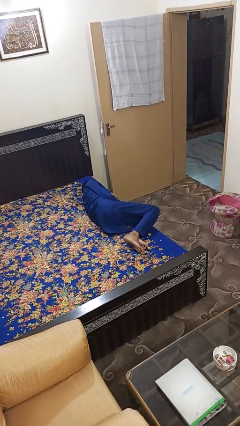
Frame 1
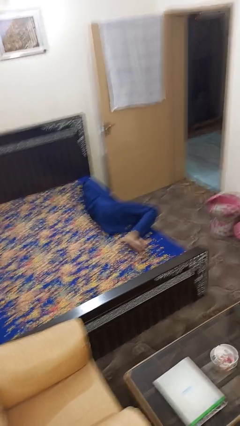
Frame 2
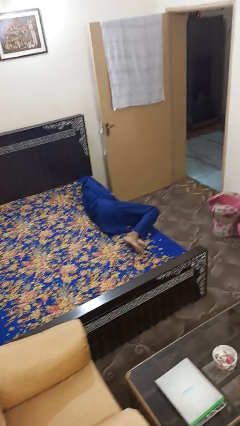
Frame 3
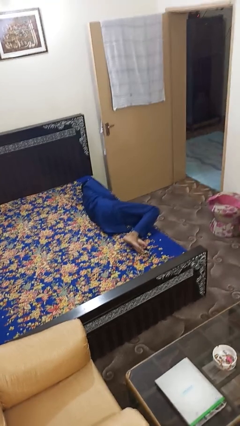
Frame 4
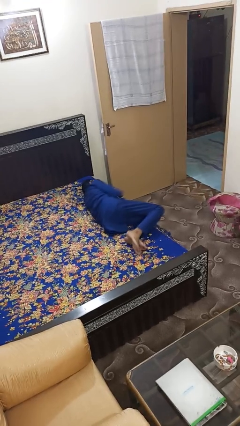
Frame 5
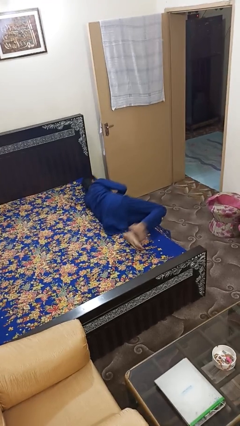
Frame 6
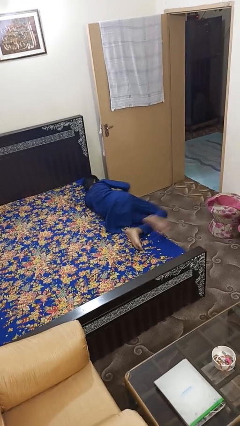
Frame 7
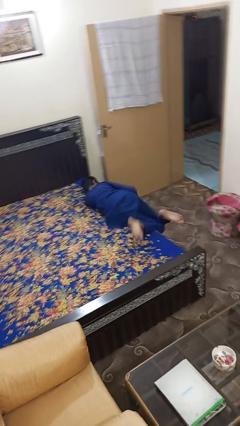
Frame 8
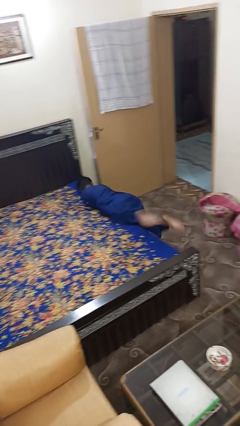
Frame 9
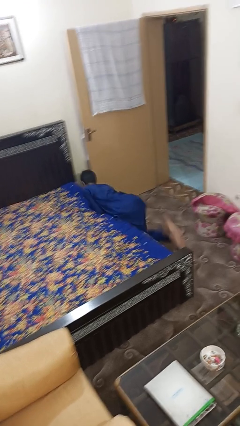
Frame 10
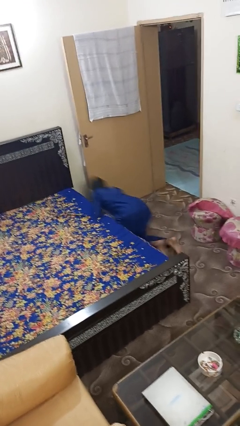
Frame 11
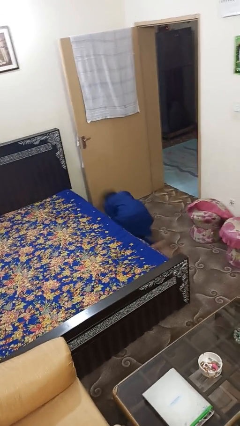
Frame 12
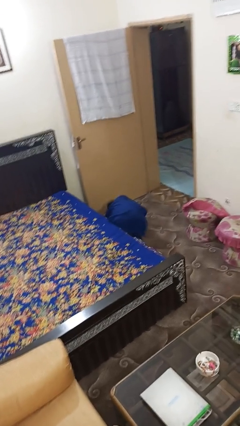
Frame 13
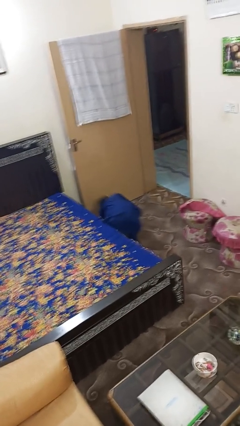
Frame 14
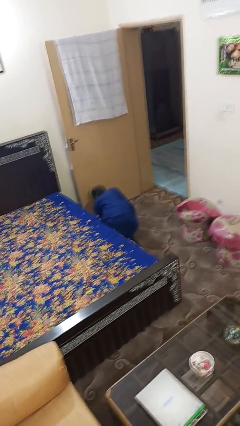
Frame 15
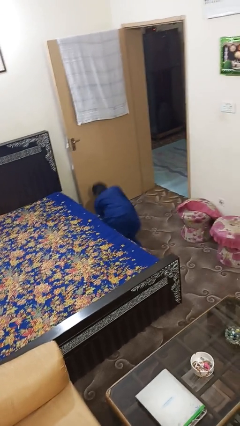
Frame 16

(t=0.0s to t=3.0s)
person falls from bed

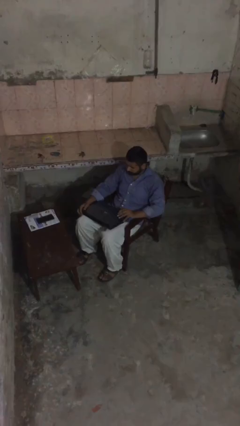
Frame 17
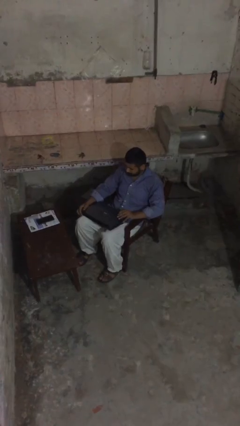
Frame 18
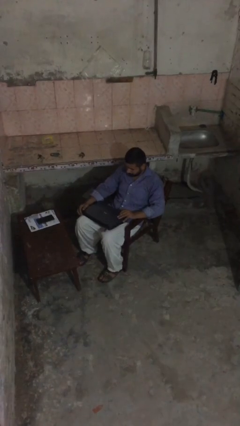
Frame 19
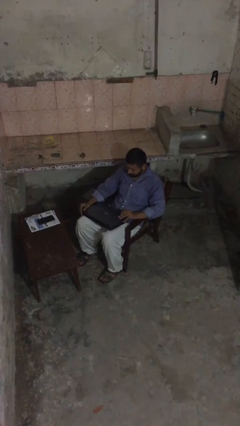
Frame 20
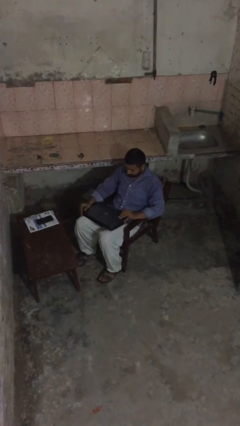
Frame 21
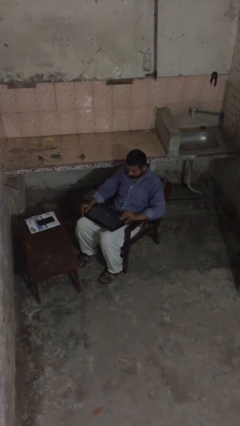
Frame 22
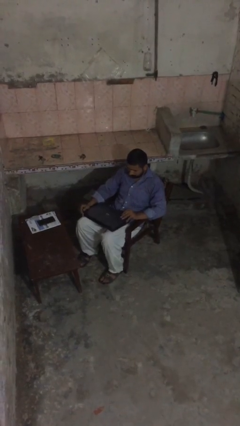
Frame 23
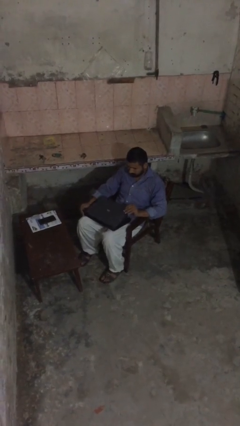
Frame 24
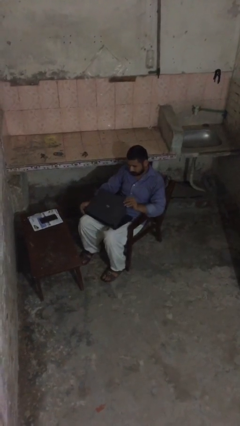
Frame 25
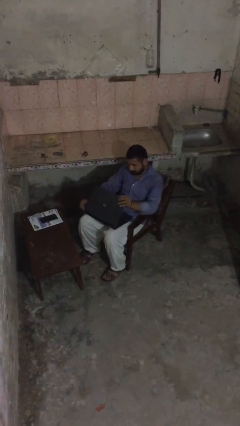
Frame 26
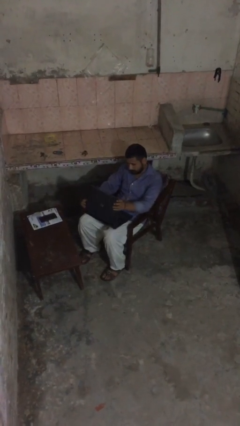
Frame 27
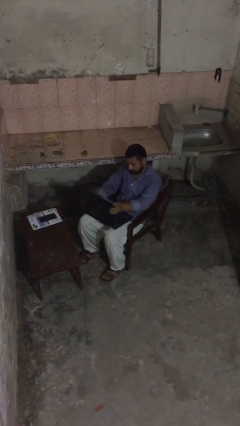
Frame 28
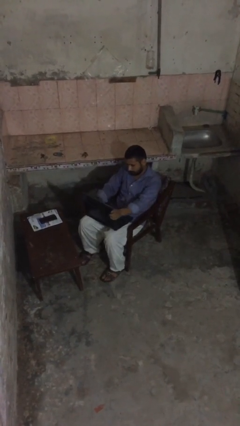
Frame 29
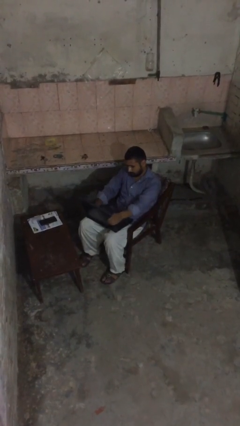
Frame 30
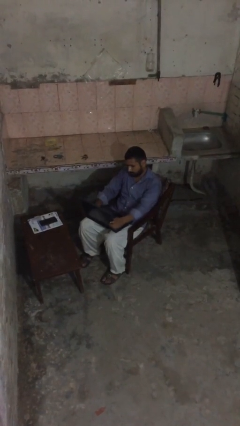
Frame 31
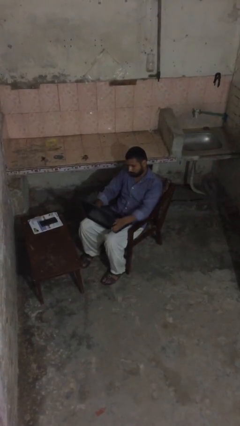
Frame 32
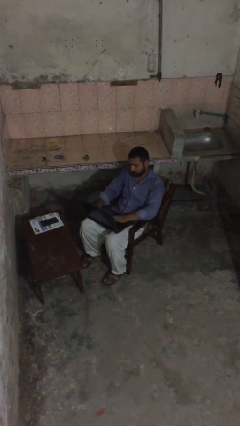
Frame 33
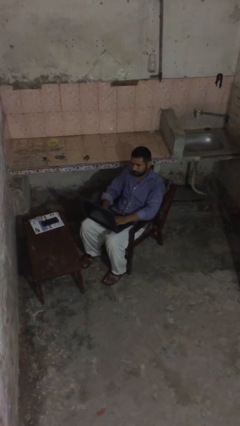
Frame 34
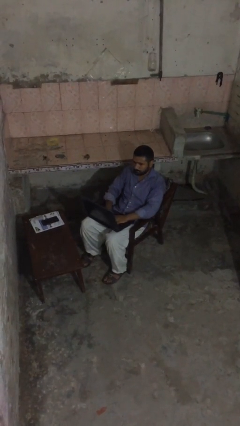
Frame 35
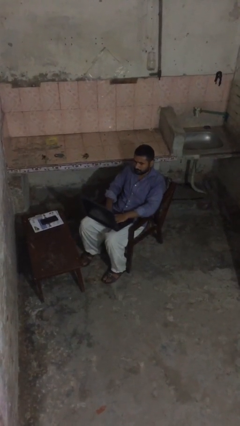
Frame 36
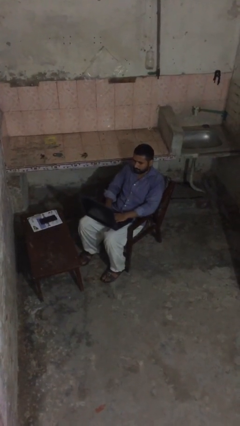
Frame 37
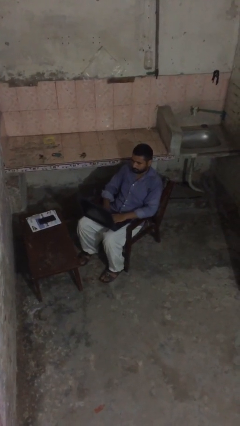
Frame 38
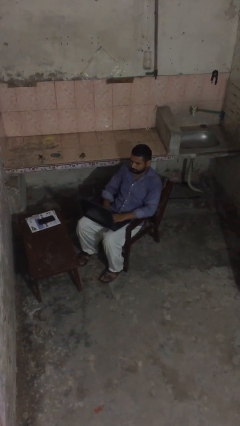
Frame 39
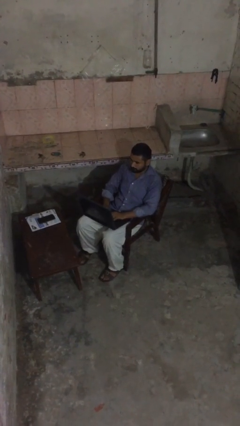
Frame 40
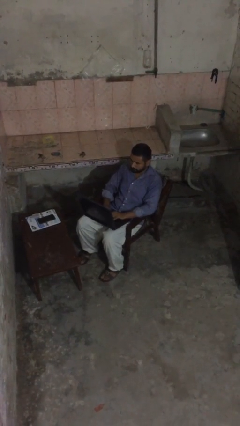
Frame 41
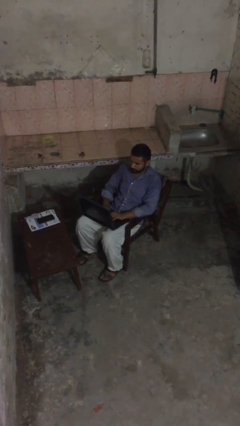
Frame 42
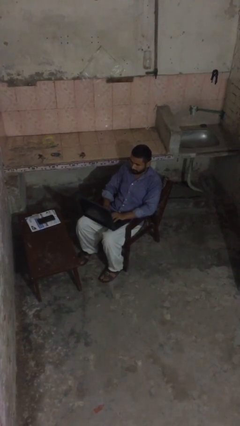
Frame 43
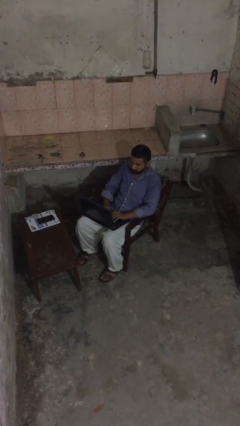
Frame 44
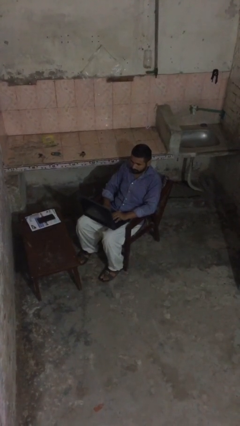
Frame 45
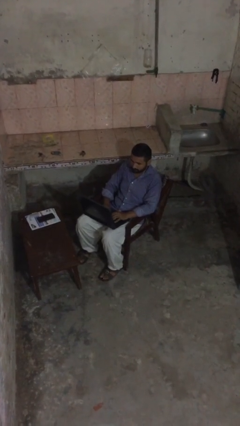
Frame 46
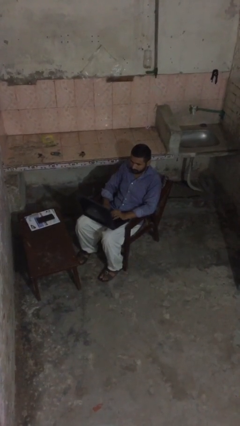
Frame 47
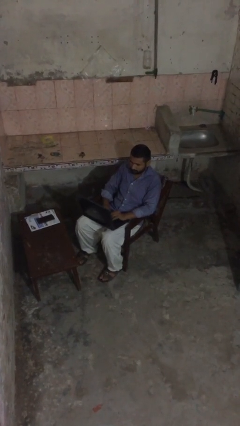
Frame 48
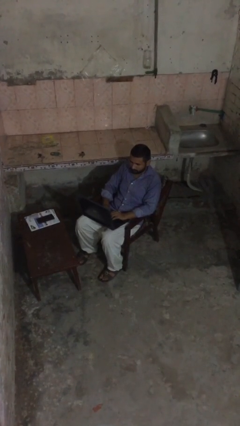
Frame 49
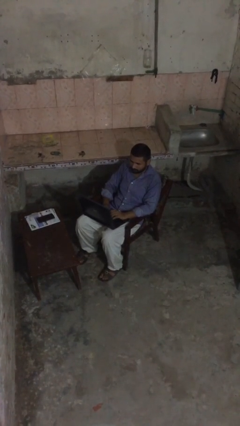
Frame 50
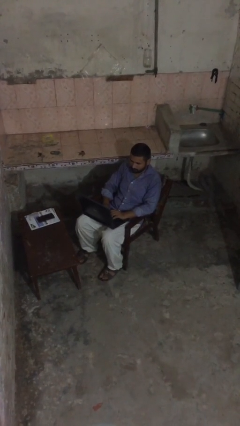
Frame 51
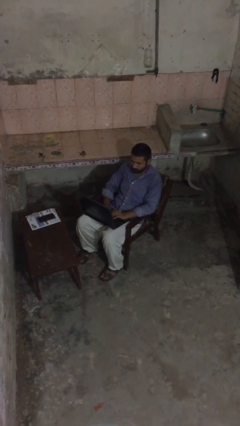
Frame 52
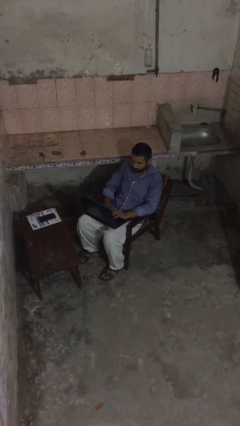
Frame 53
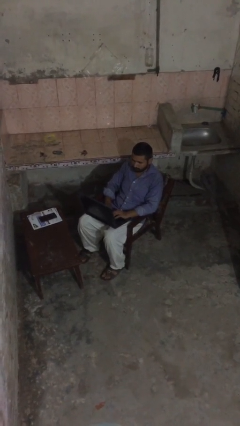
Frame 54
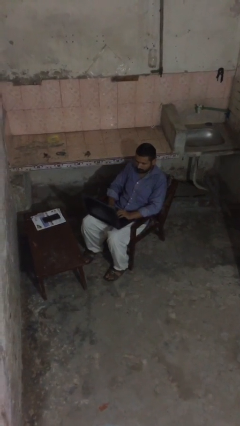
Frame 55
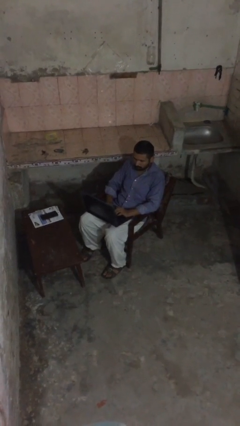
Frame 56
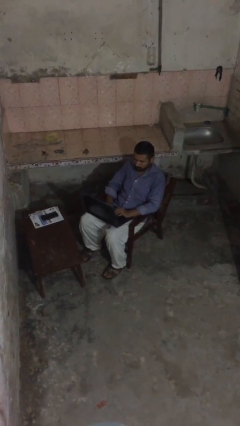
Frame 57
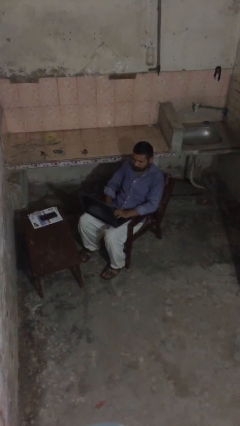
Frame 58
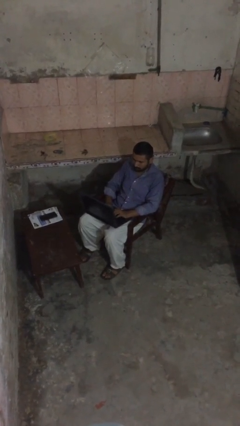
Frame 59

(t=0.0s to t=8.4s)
person interacts with laptop

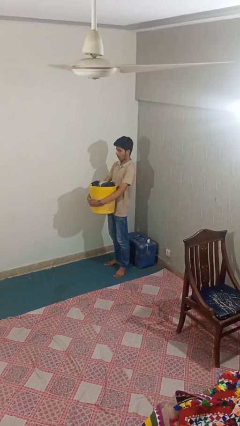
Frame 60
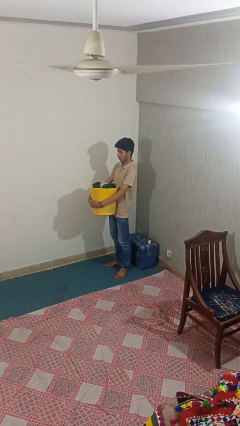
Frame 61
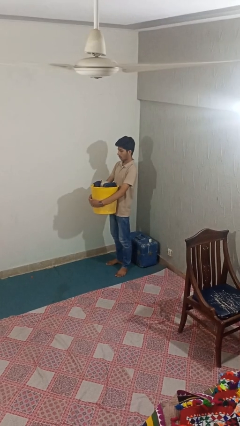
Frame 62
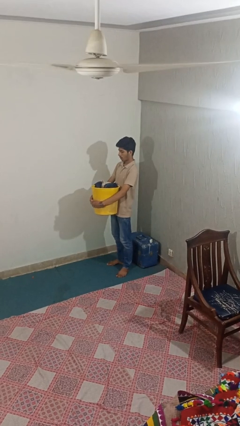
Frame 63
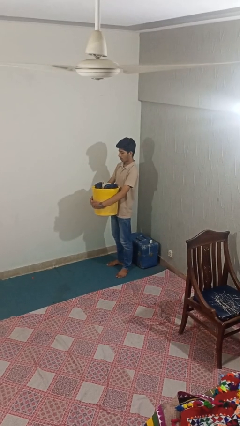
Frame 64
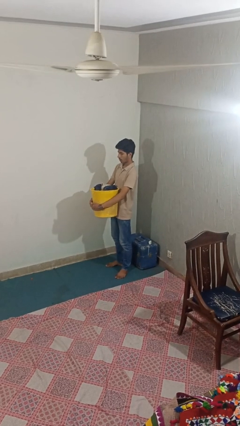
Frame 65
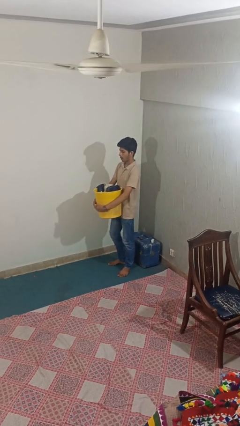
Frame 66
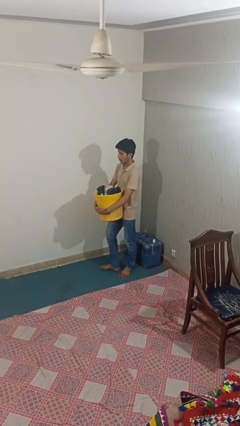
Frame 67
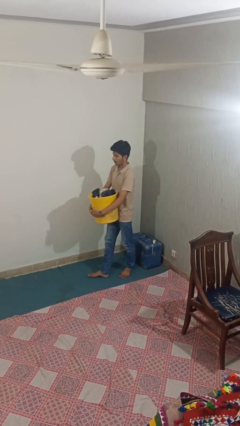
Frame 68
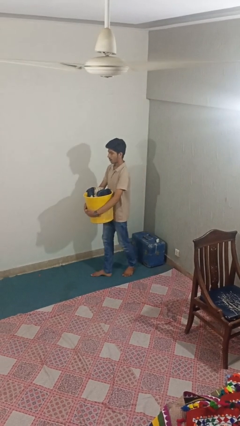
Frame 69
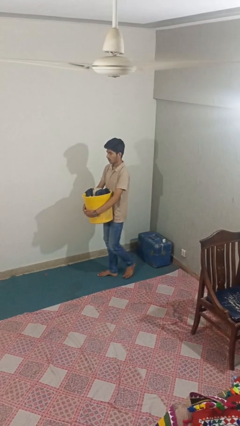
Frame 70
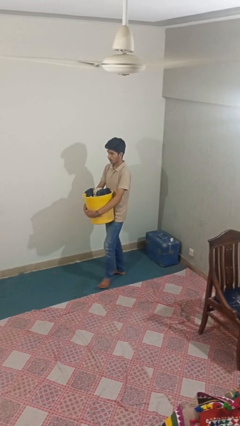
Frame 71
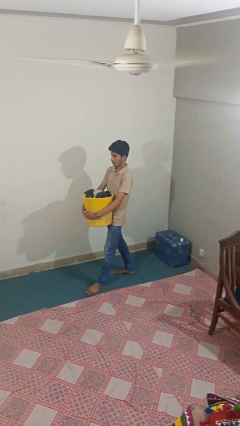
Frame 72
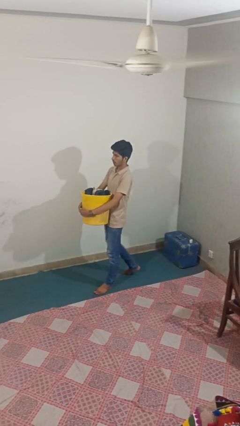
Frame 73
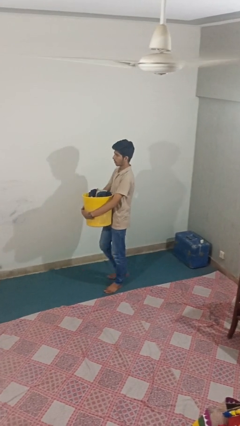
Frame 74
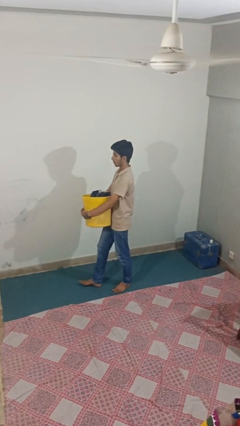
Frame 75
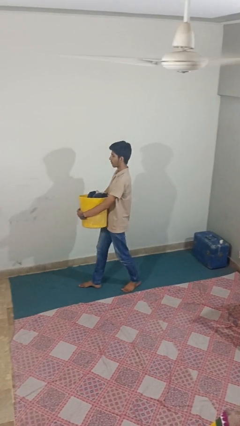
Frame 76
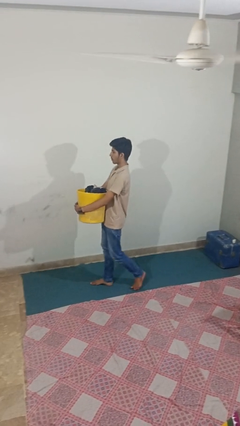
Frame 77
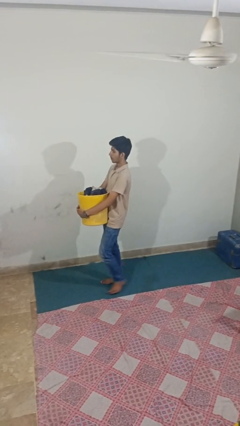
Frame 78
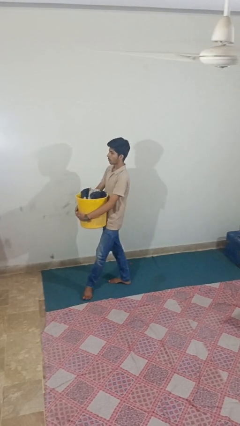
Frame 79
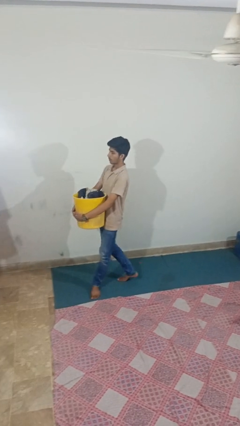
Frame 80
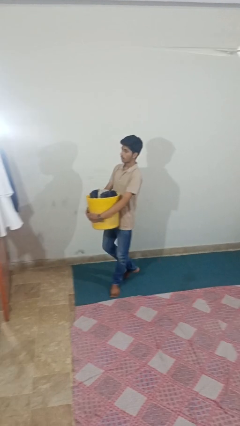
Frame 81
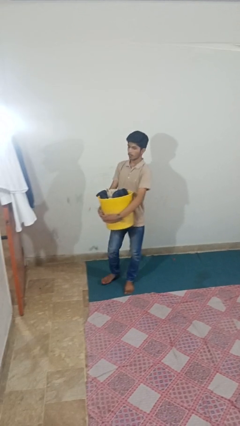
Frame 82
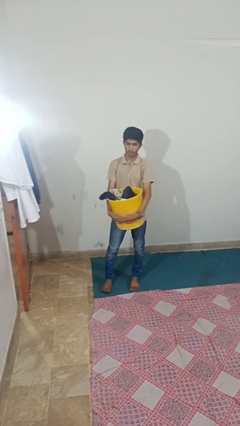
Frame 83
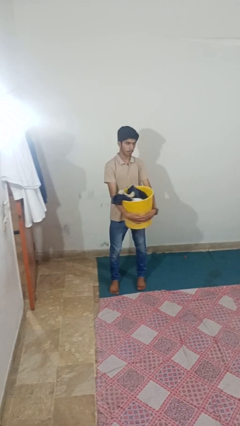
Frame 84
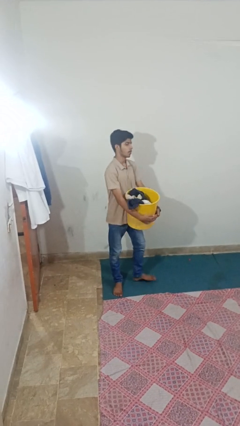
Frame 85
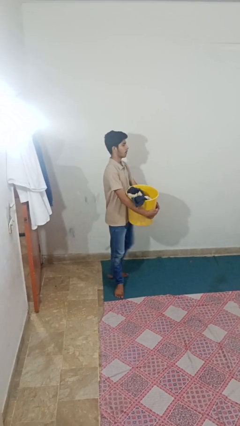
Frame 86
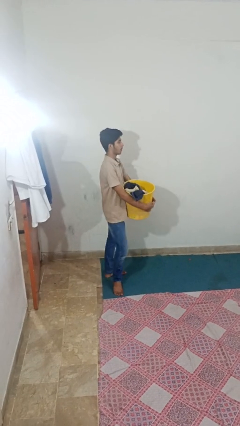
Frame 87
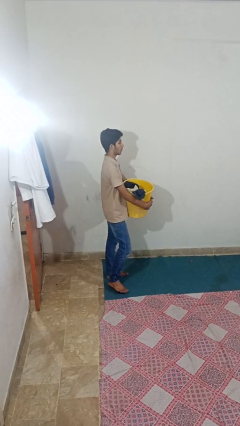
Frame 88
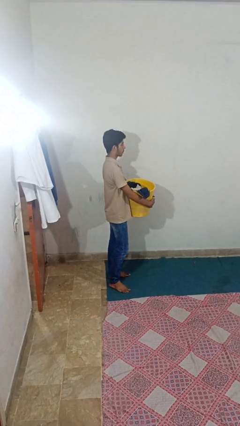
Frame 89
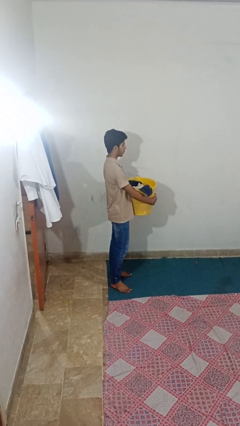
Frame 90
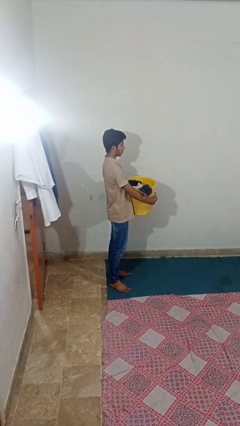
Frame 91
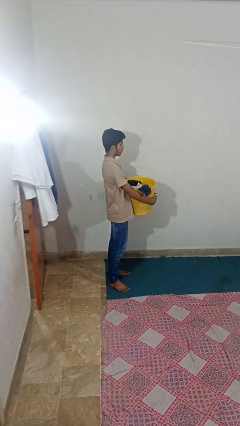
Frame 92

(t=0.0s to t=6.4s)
person carries laundry basket

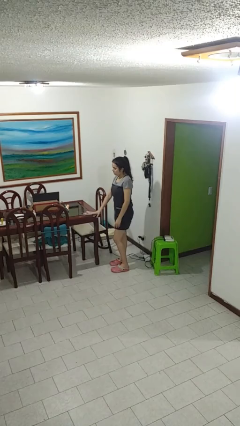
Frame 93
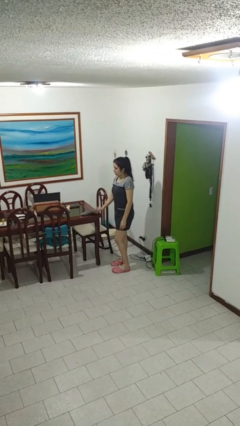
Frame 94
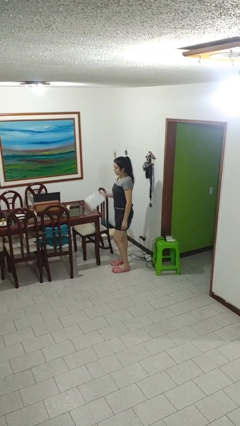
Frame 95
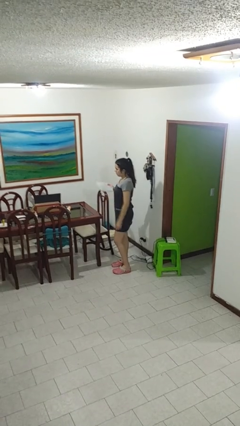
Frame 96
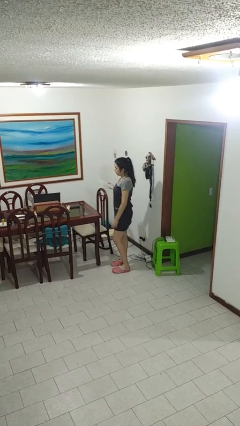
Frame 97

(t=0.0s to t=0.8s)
person picks up object from table
